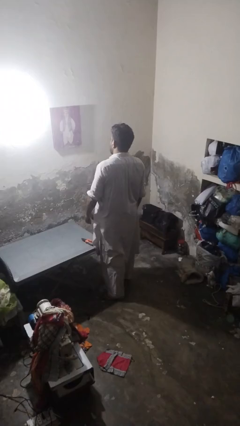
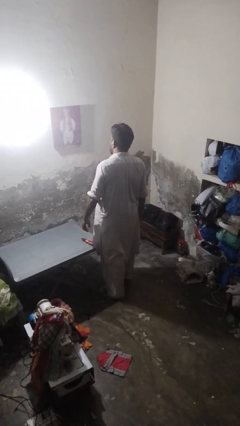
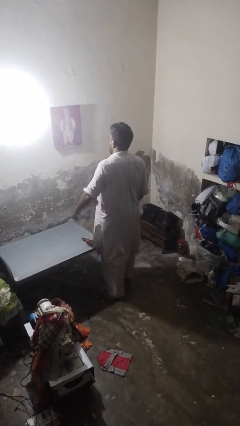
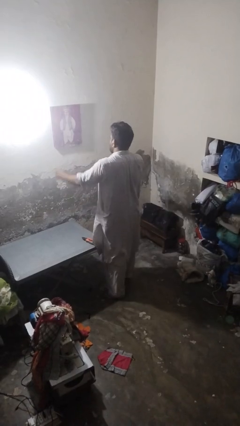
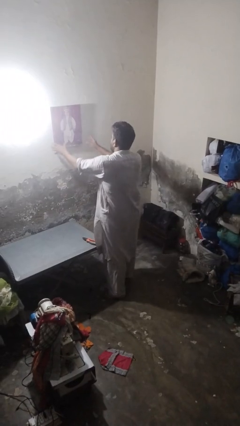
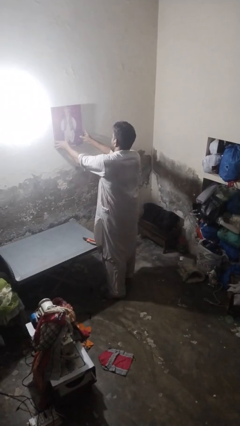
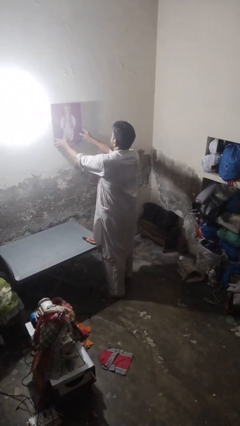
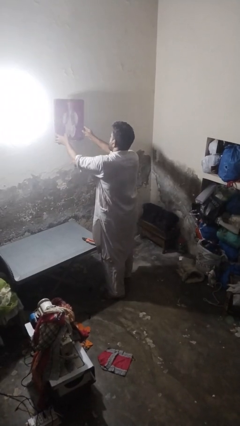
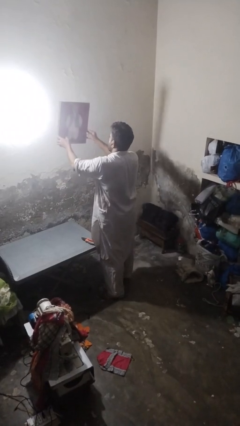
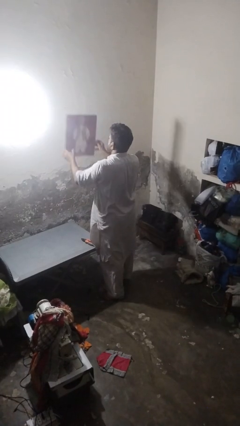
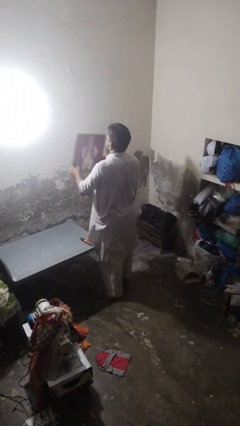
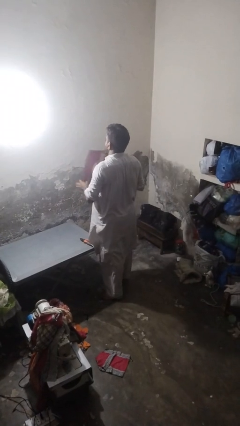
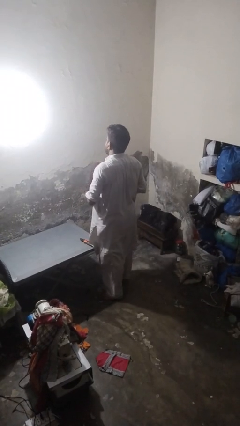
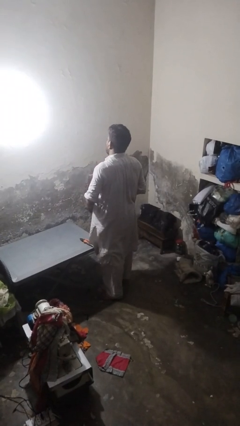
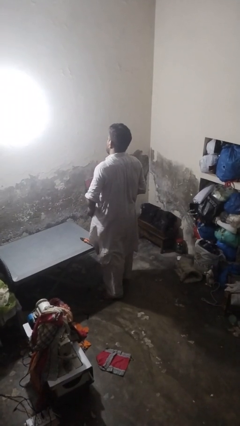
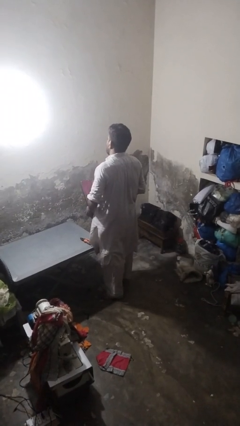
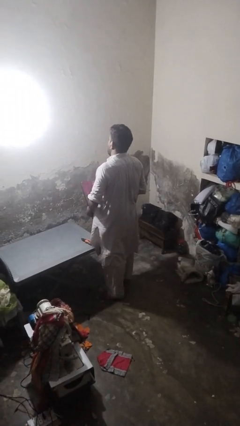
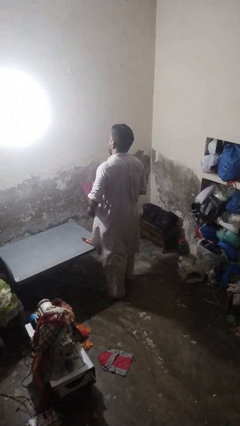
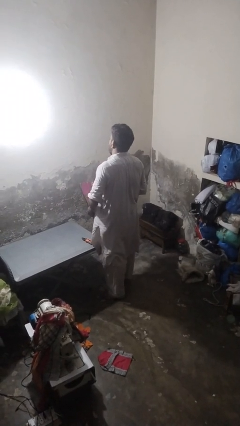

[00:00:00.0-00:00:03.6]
person takes down picture frame

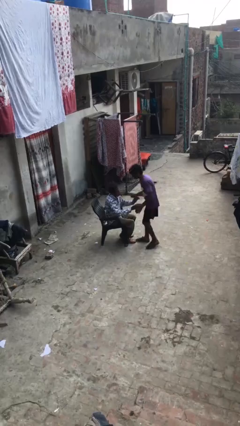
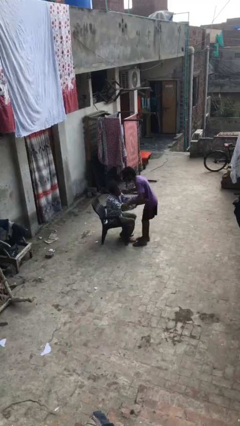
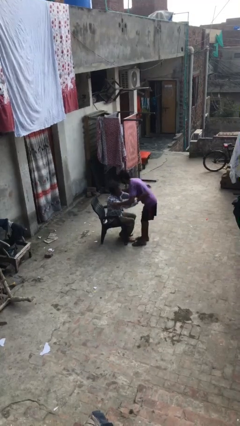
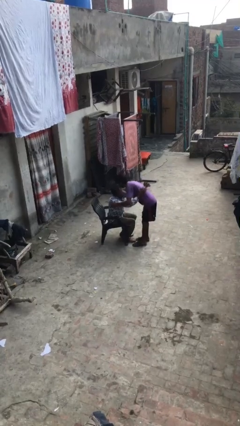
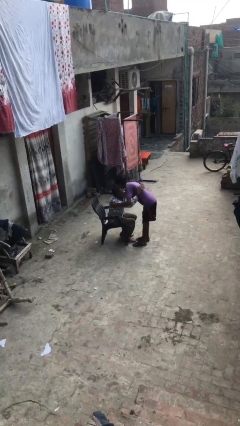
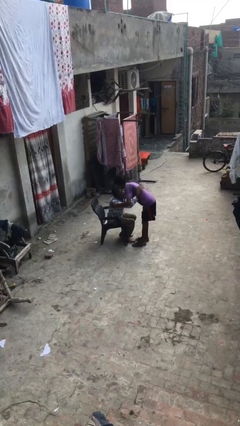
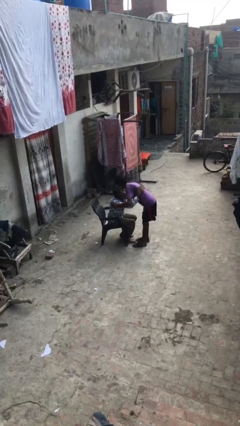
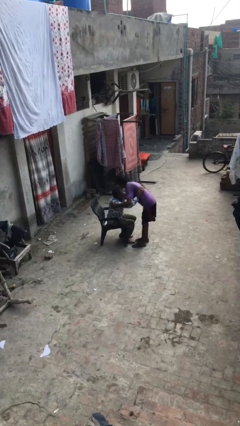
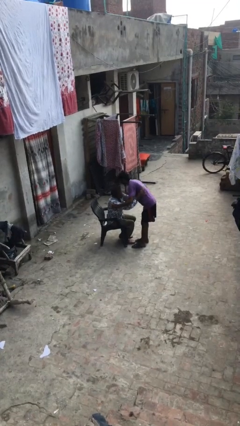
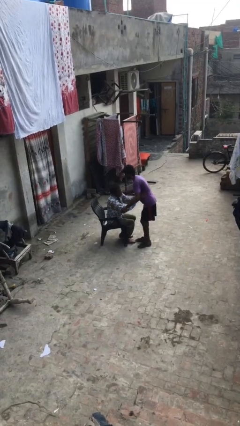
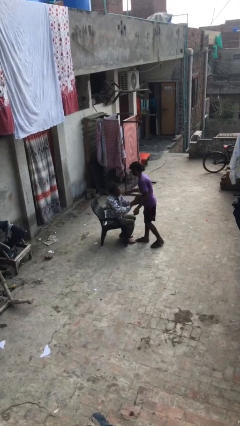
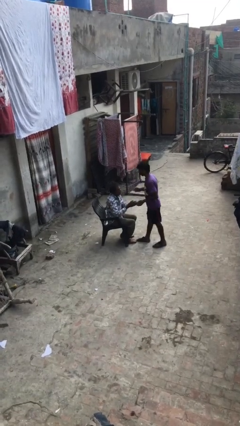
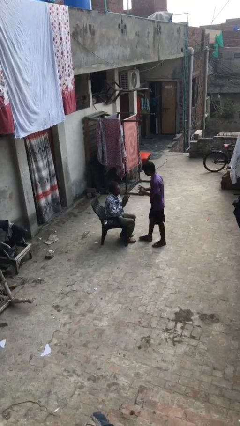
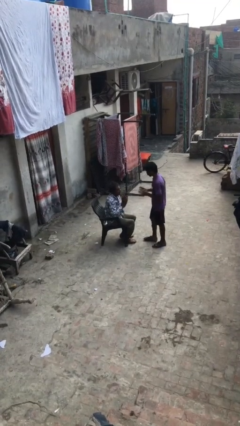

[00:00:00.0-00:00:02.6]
person embraces person

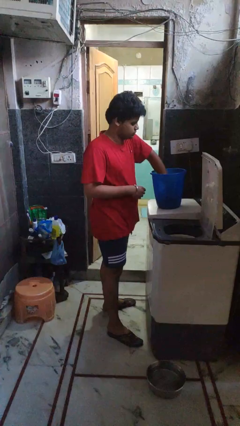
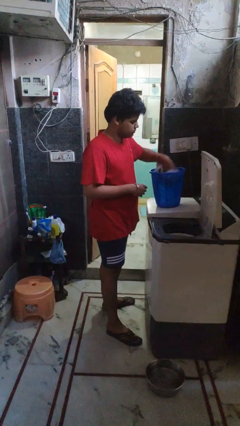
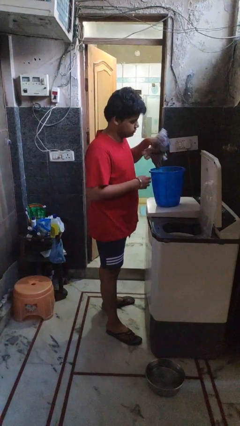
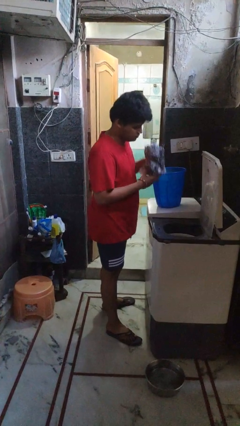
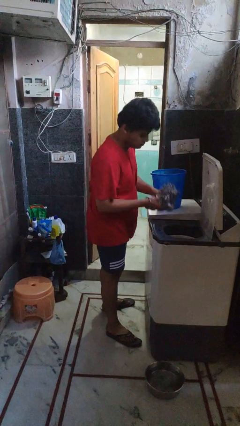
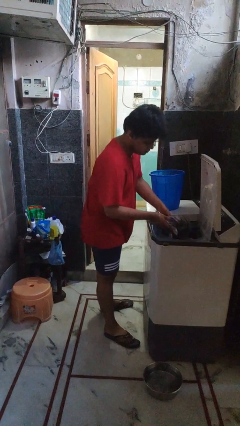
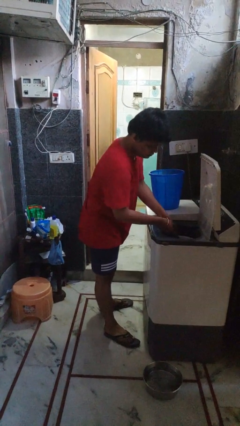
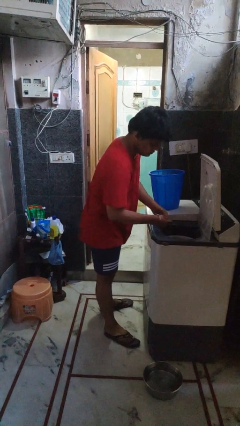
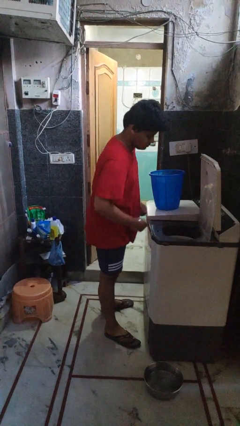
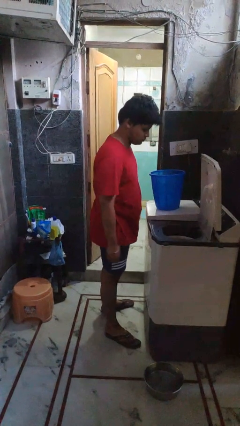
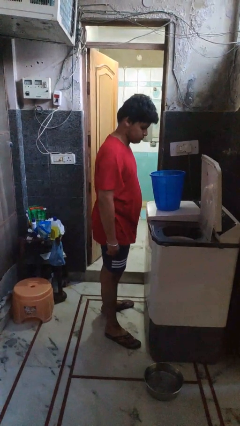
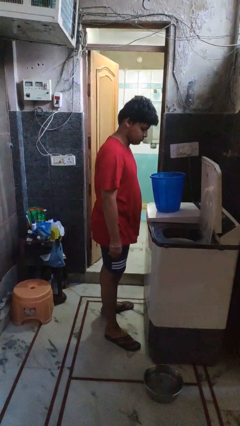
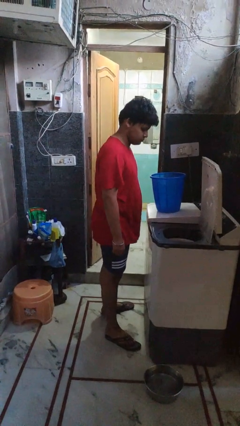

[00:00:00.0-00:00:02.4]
person loads dryer

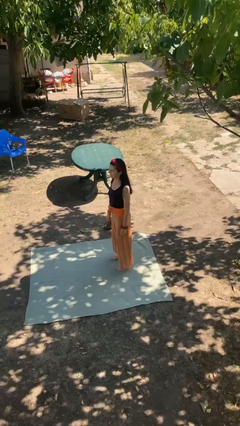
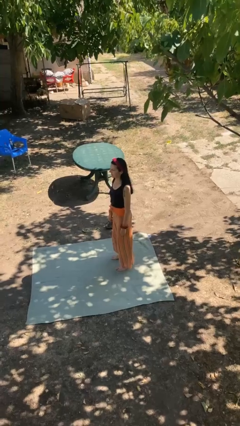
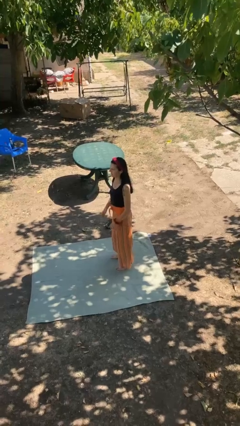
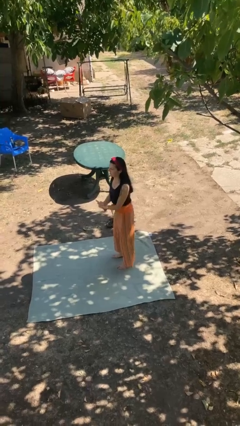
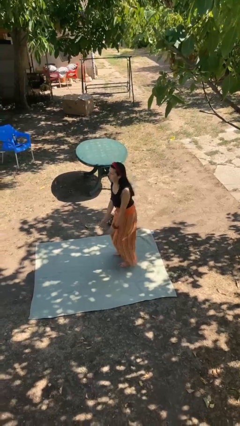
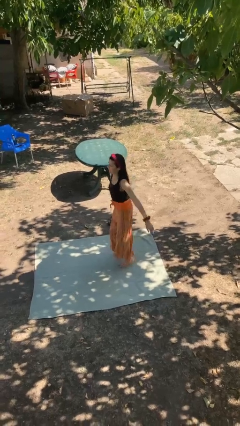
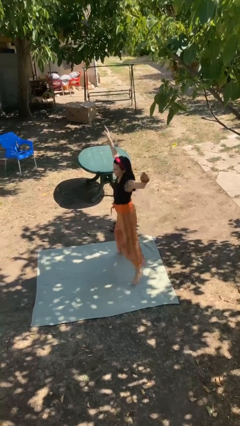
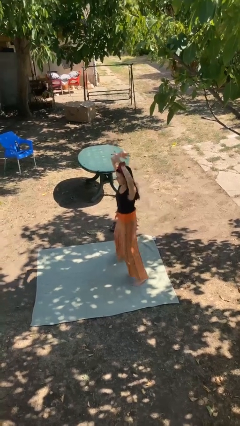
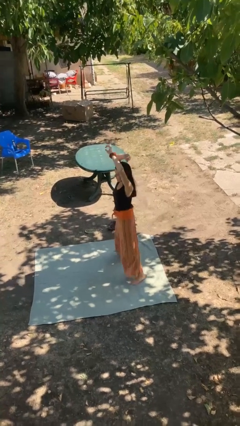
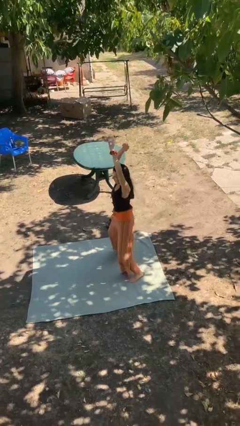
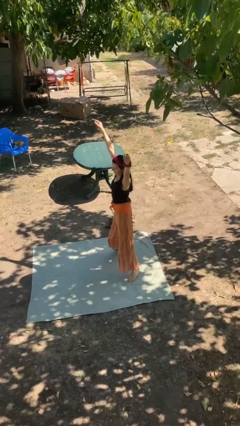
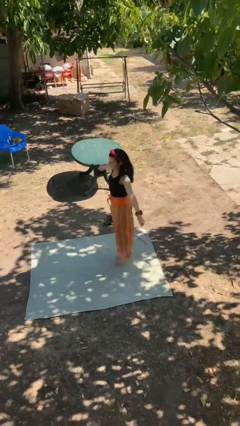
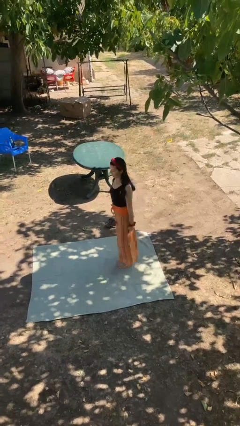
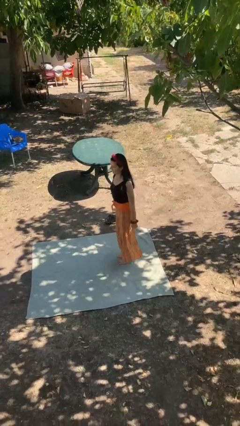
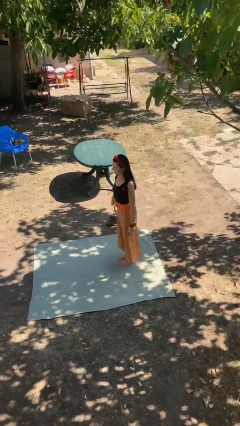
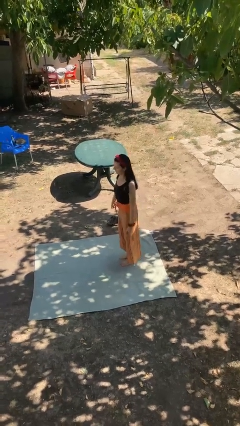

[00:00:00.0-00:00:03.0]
person exercises with jumping jacks

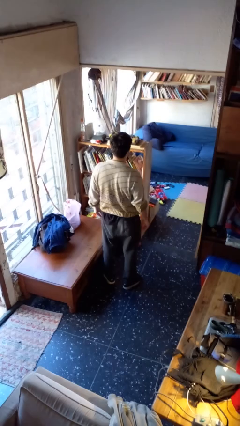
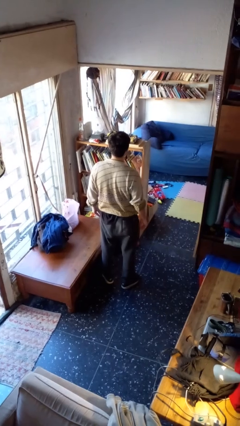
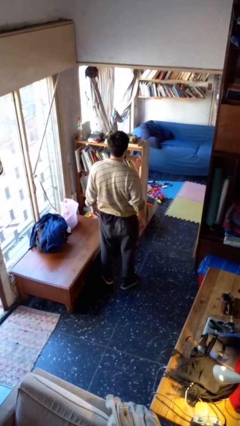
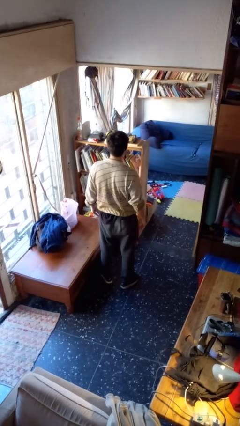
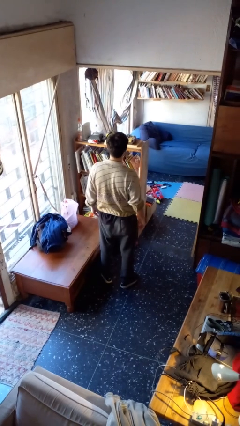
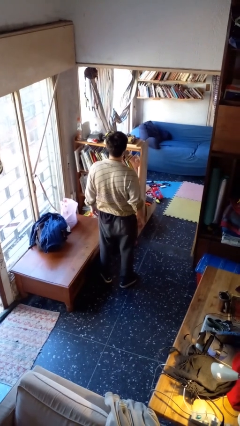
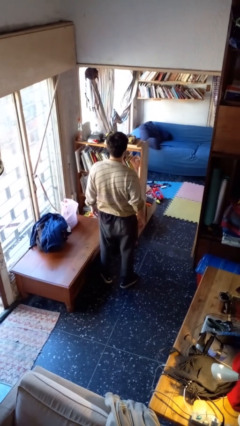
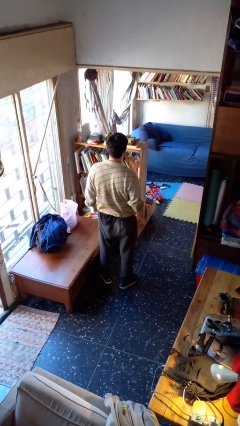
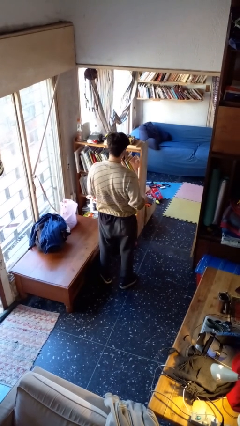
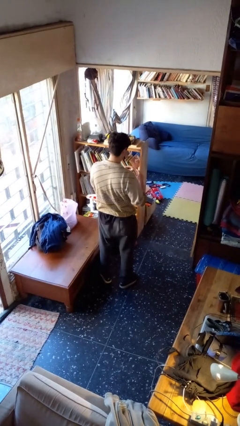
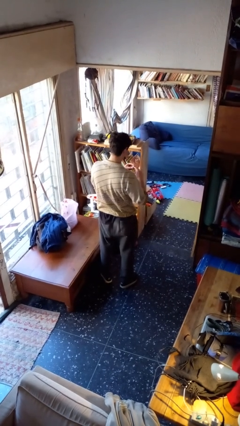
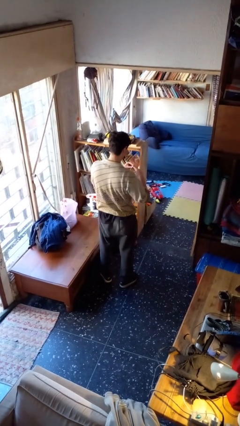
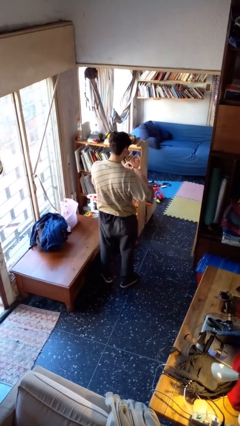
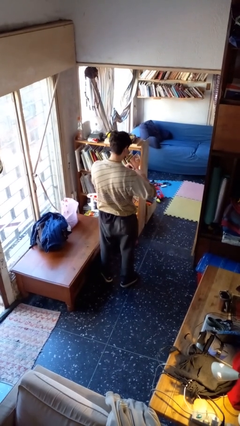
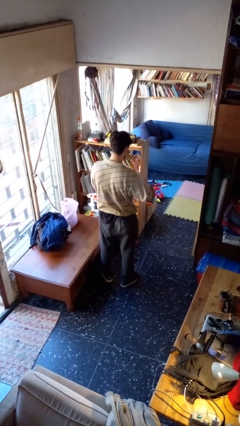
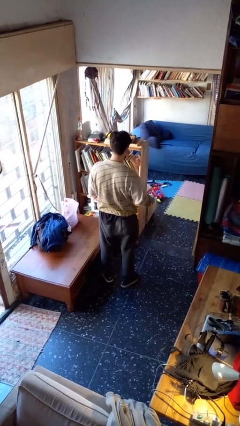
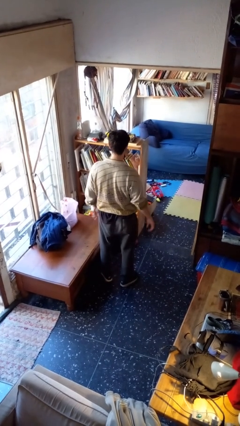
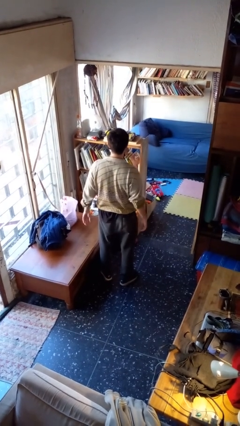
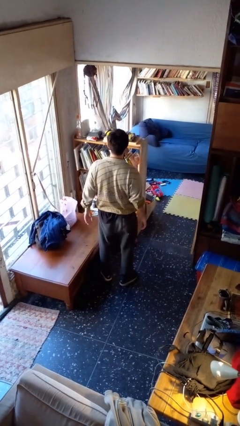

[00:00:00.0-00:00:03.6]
person puts on ring

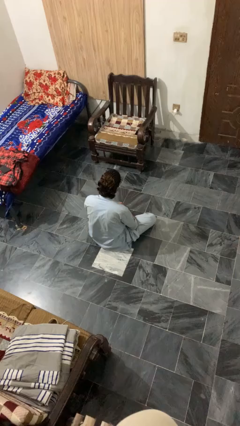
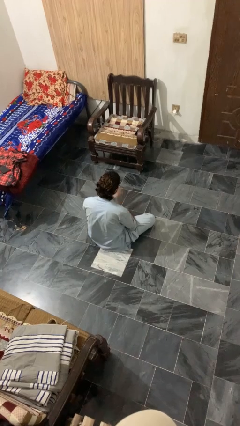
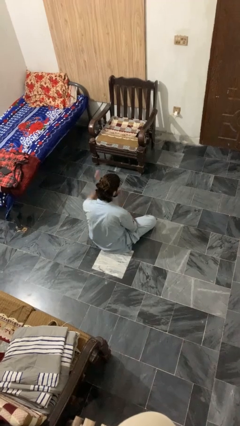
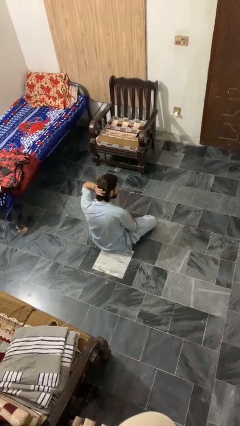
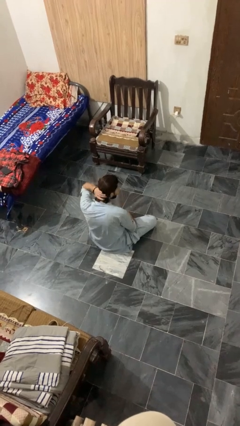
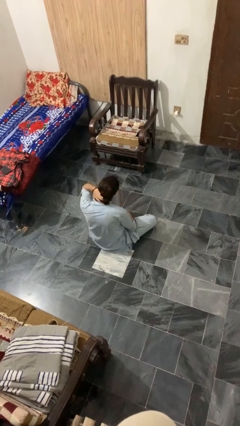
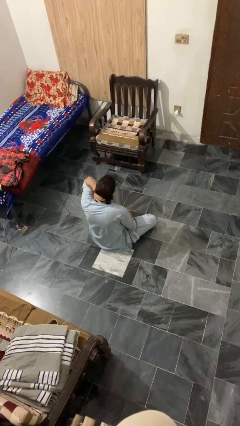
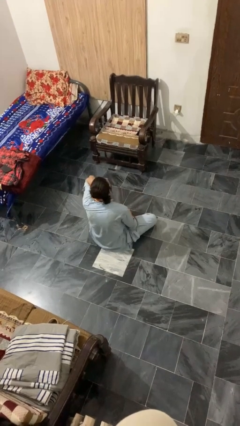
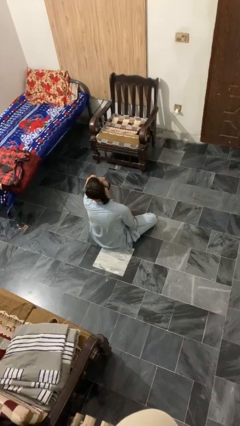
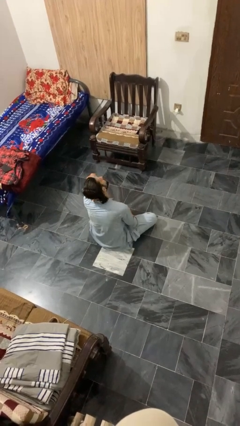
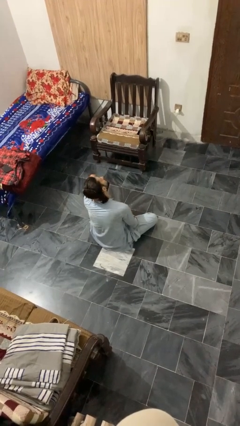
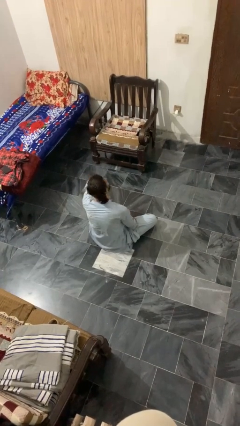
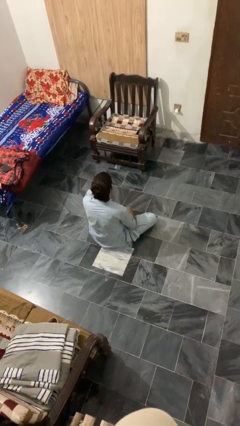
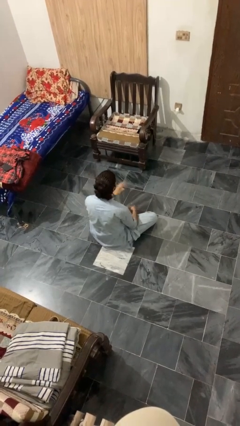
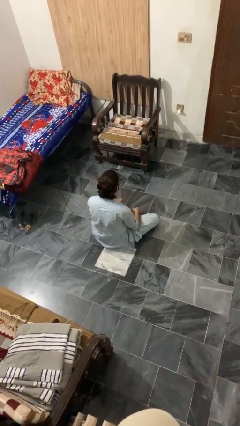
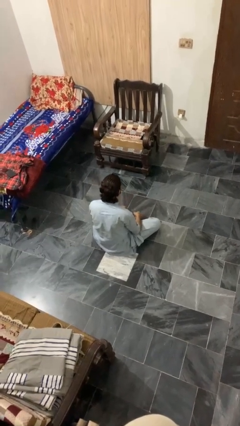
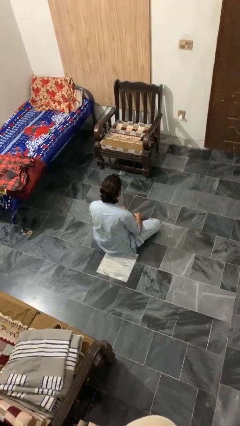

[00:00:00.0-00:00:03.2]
person rubs neck
